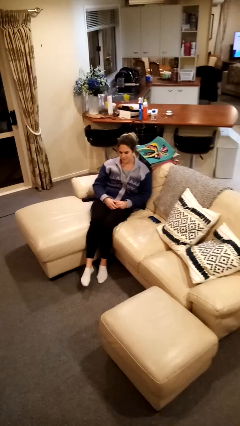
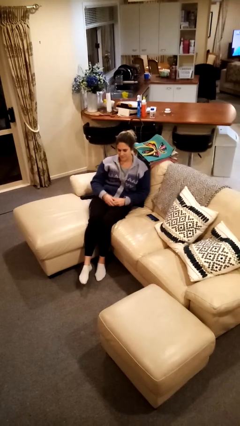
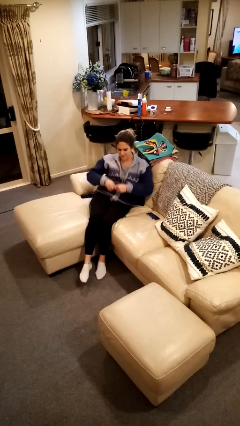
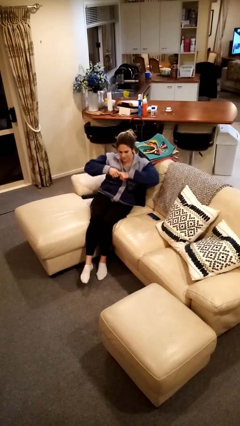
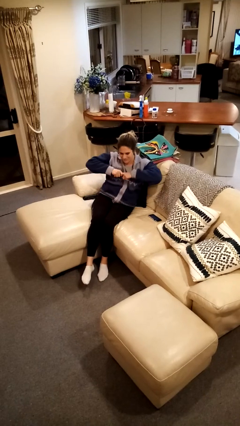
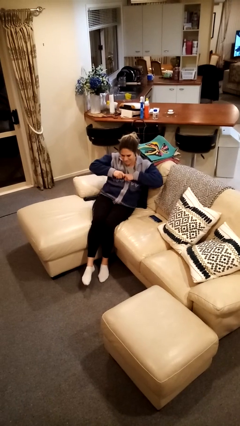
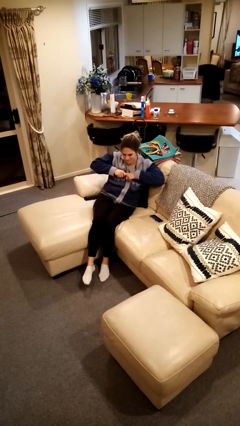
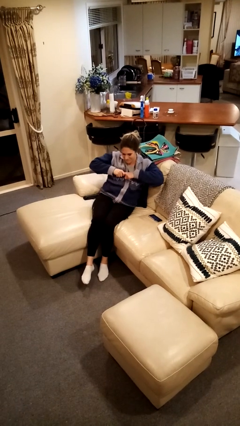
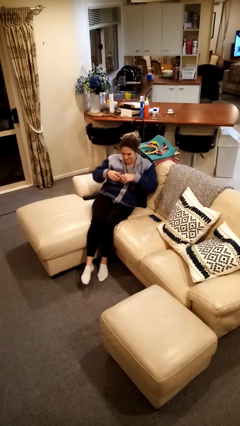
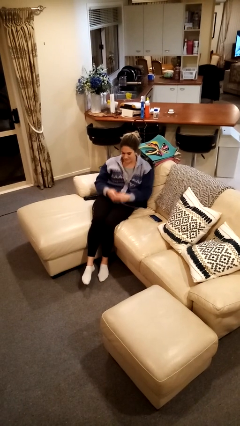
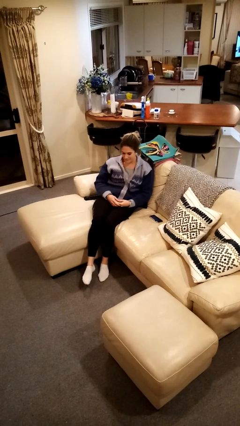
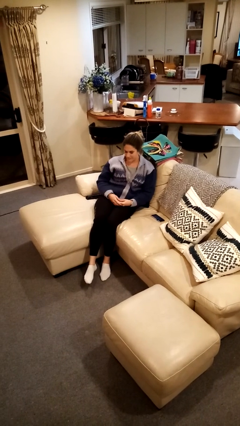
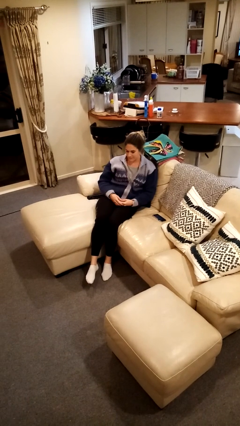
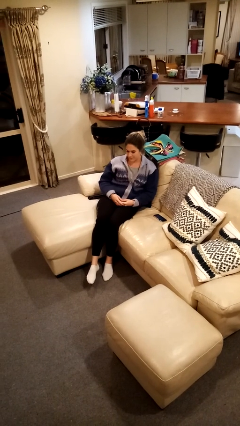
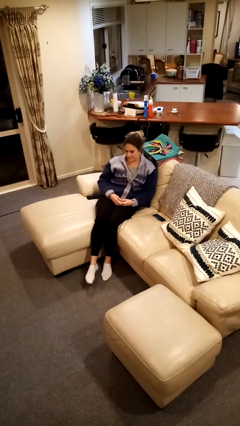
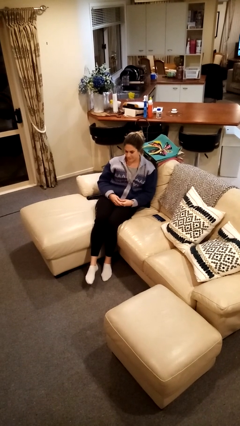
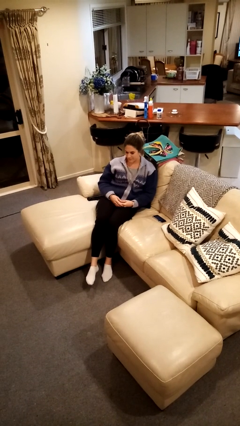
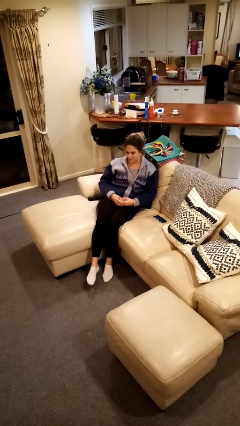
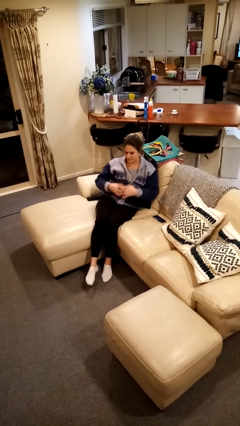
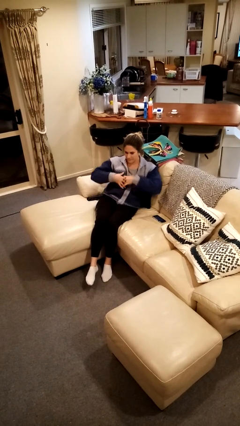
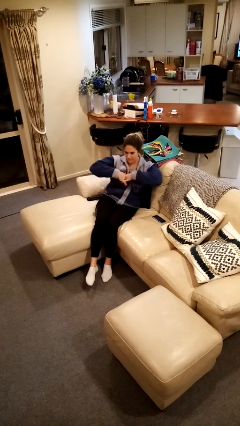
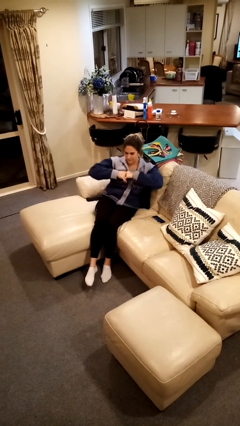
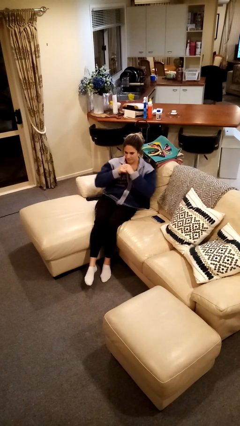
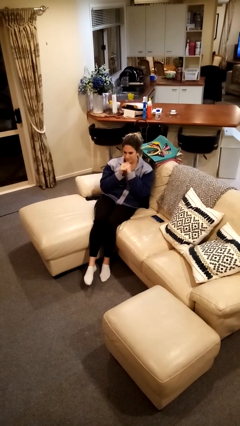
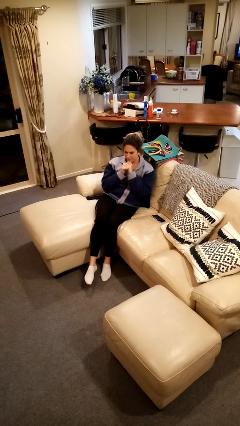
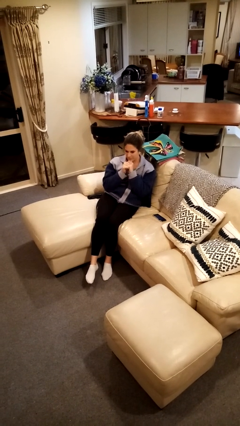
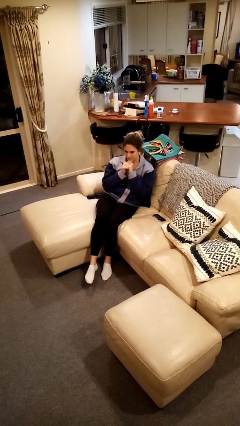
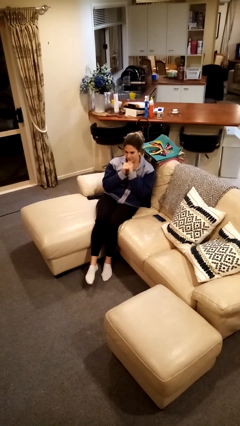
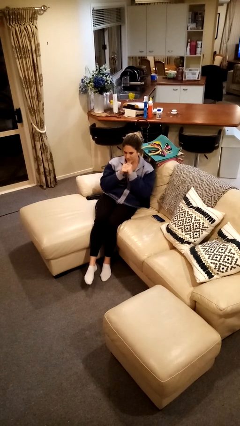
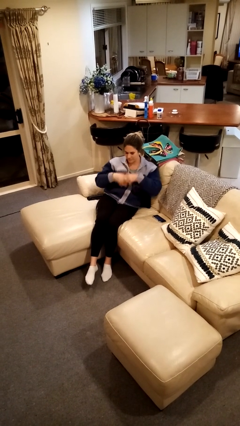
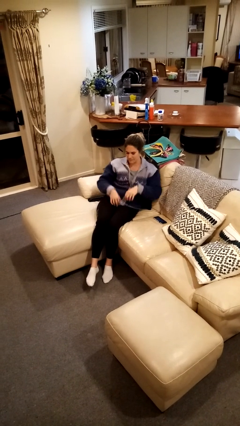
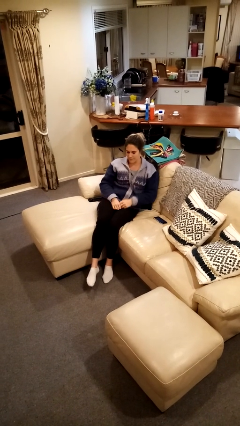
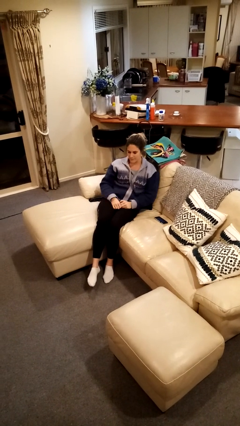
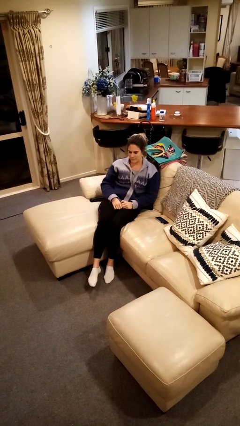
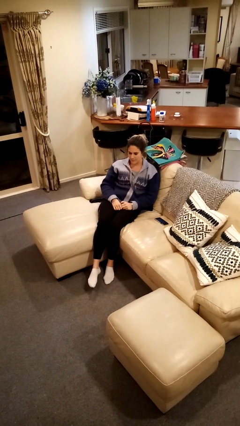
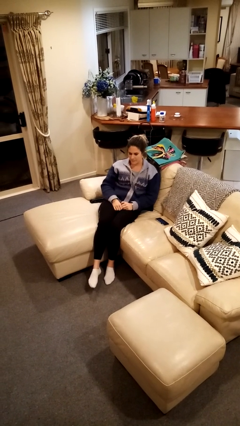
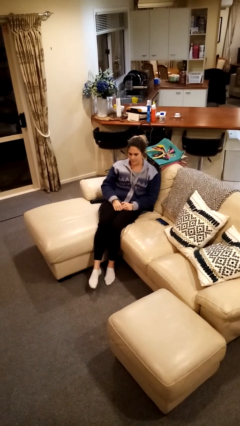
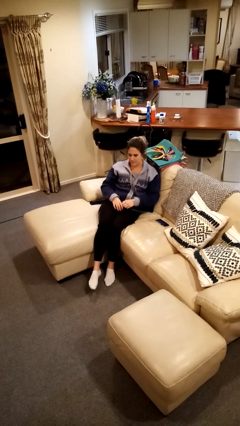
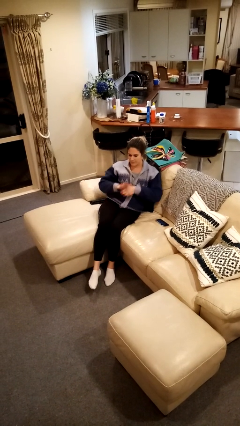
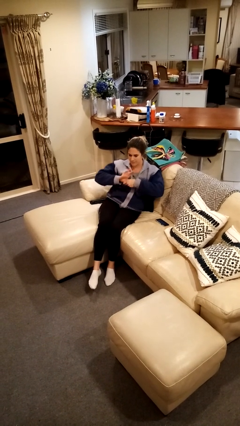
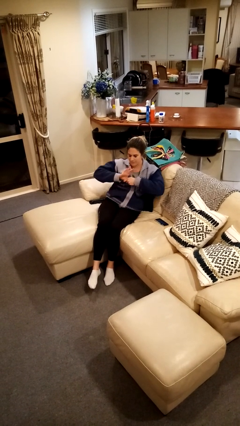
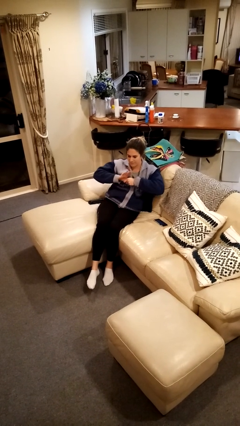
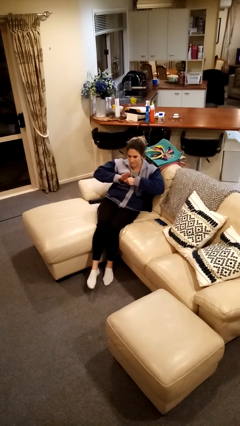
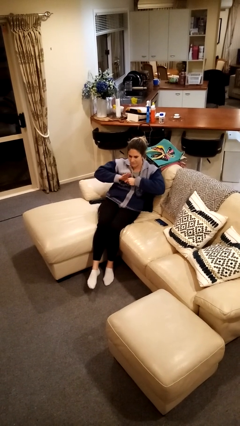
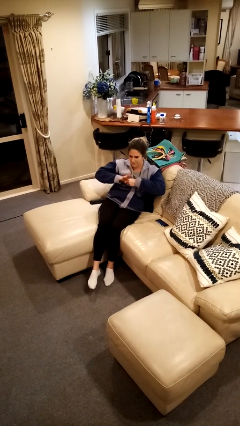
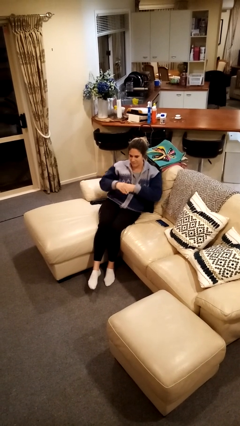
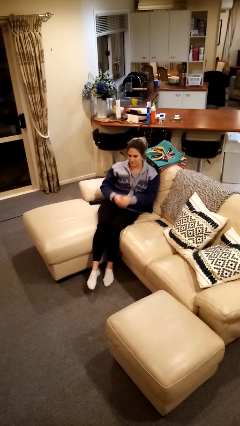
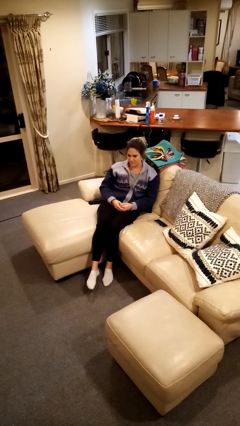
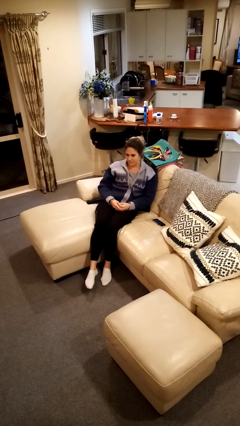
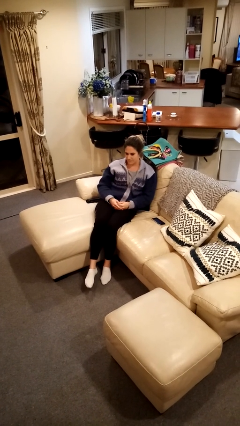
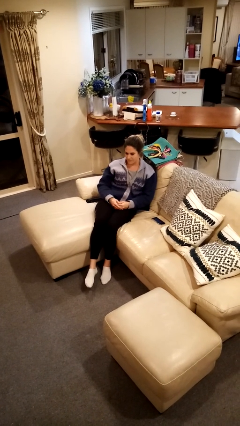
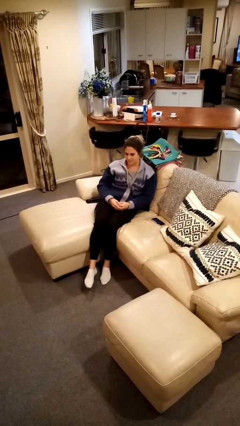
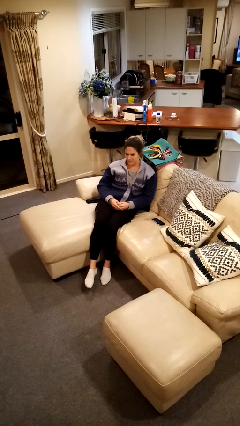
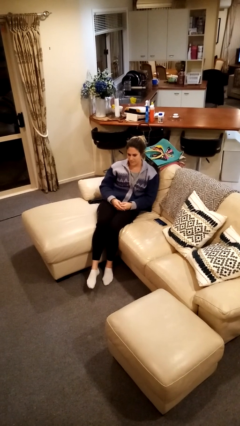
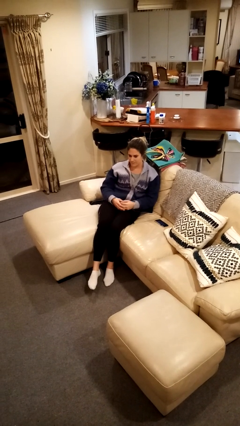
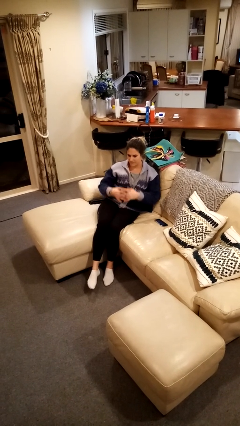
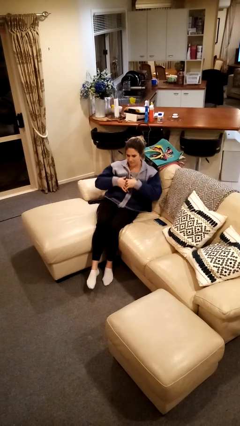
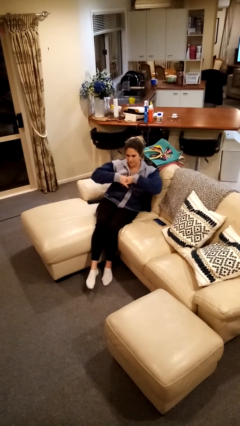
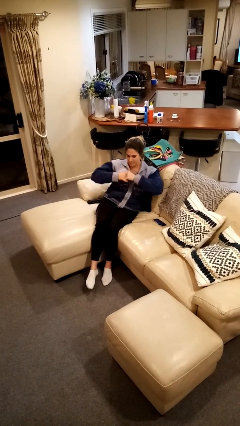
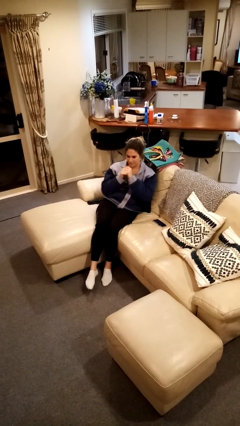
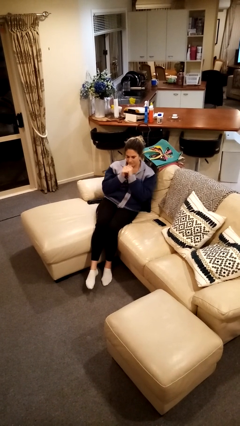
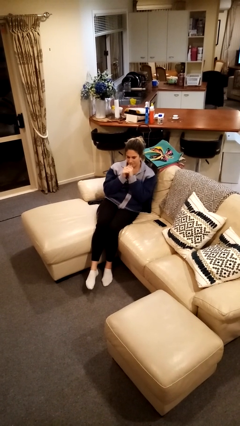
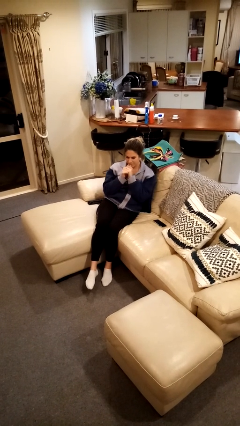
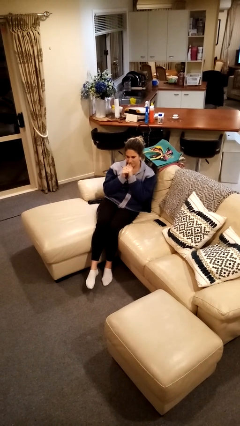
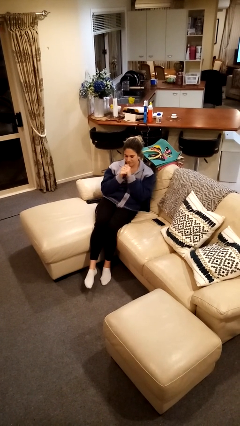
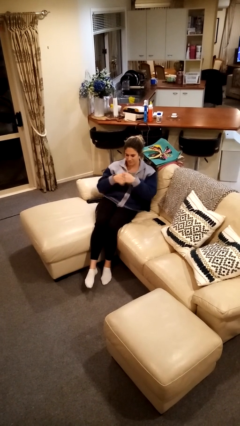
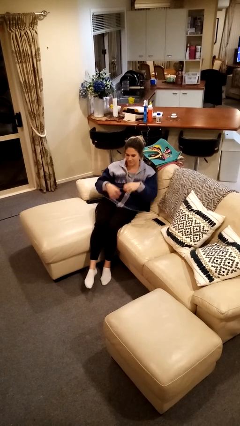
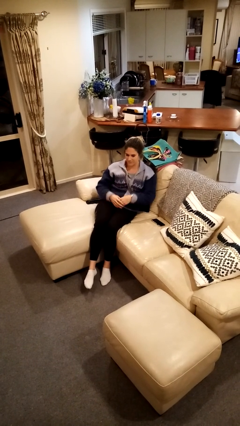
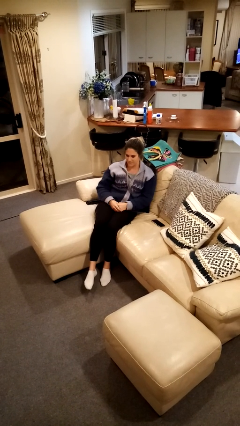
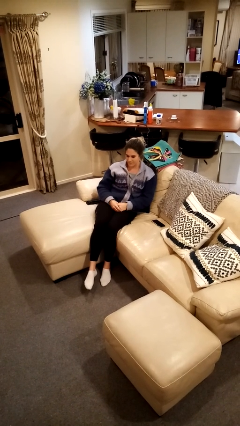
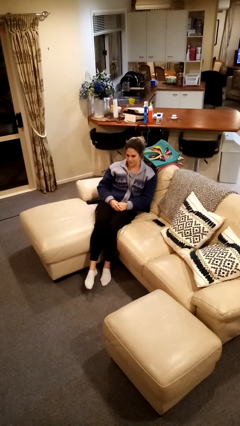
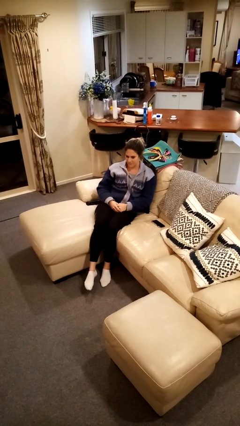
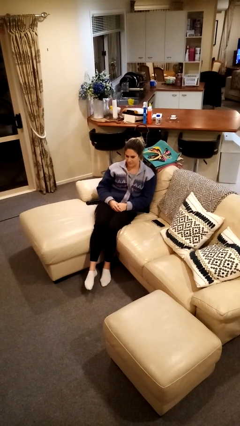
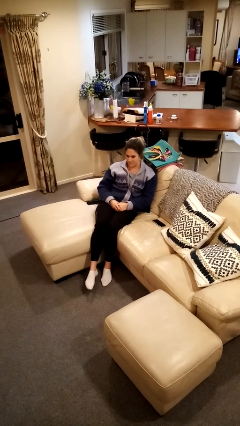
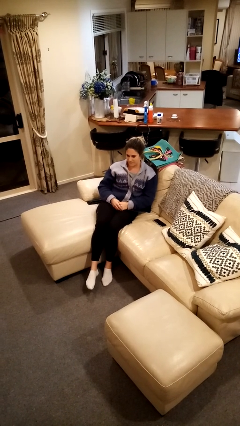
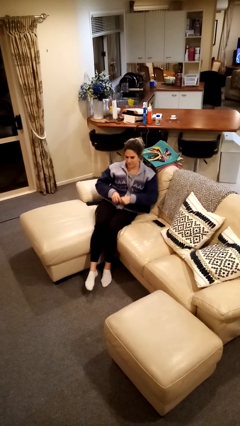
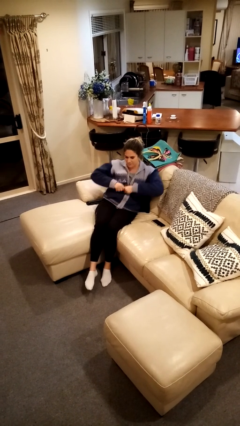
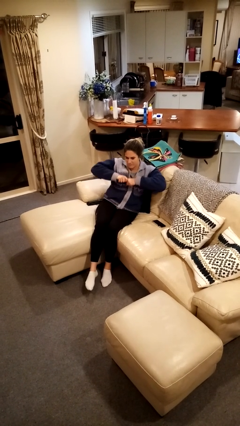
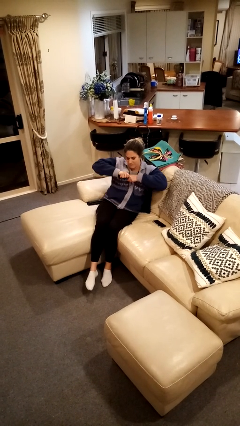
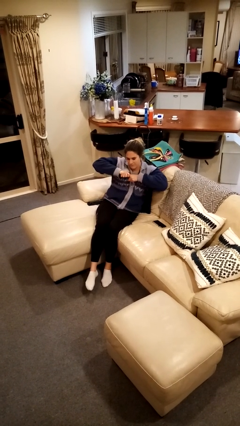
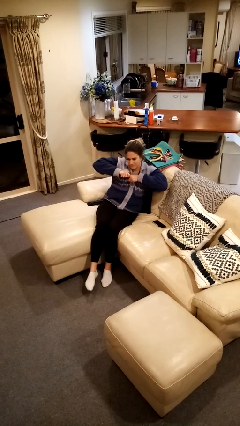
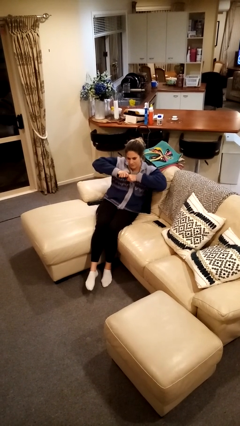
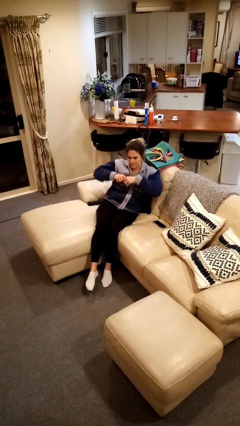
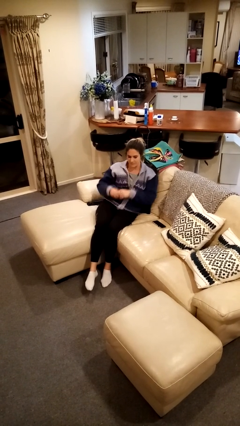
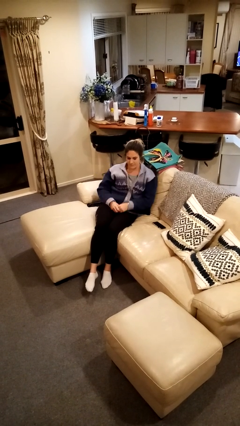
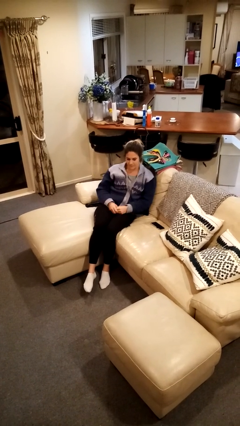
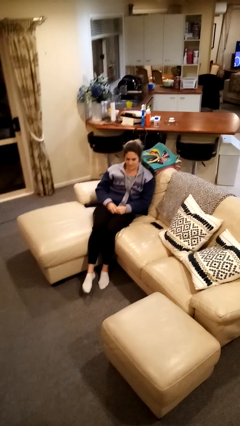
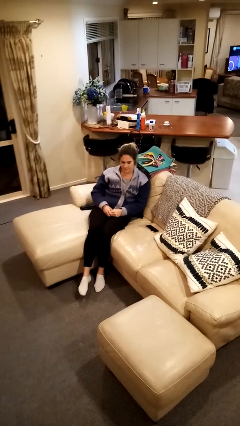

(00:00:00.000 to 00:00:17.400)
person cracks knuckles

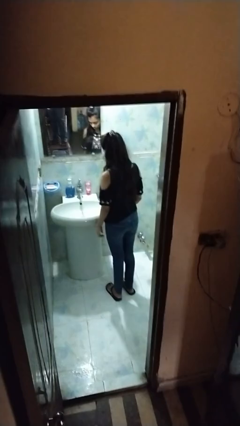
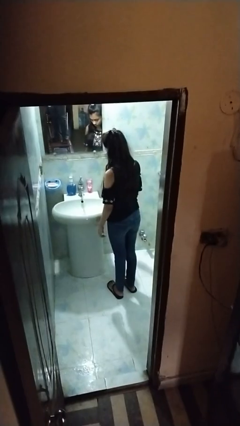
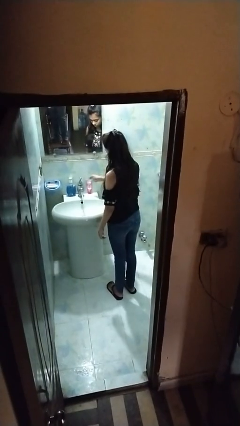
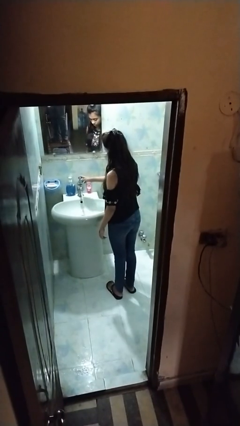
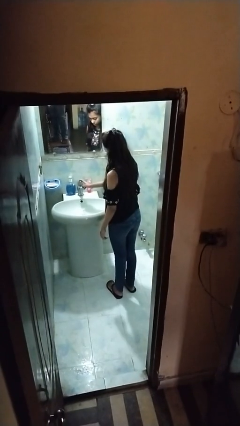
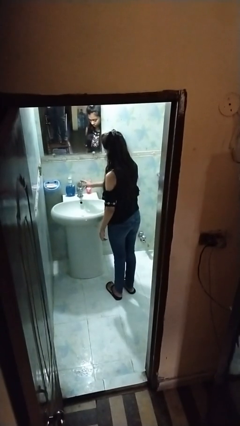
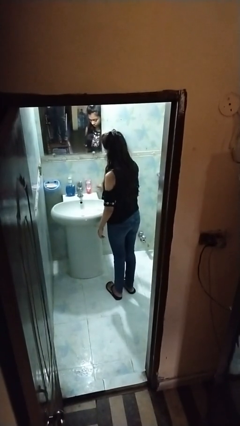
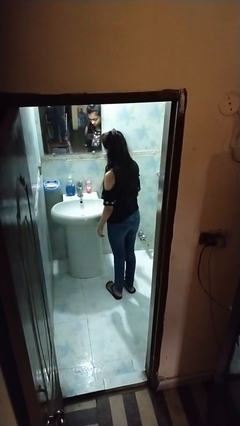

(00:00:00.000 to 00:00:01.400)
person turns off faucet
